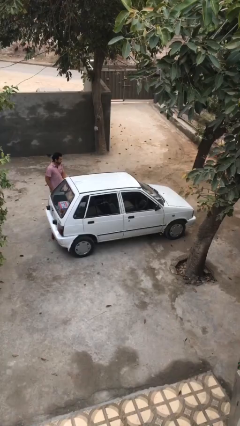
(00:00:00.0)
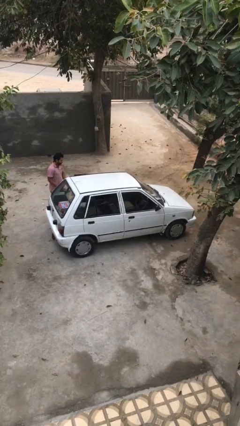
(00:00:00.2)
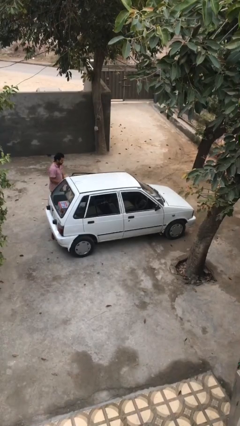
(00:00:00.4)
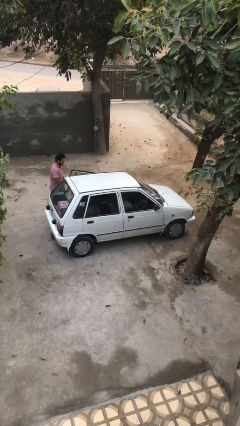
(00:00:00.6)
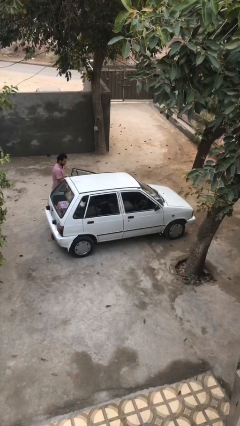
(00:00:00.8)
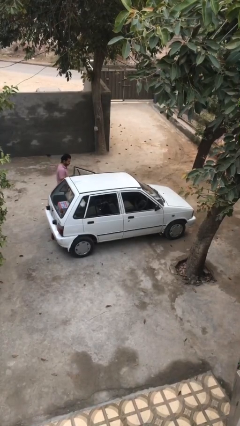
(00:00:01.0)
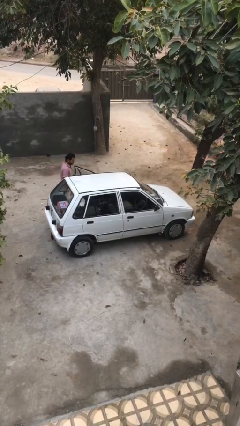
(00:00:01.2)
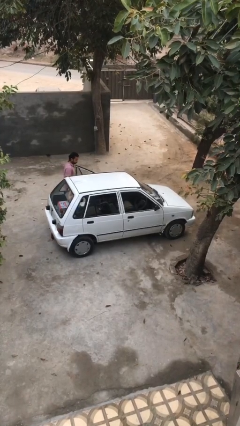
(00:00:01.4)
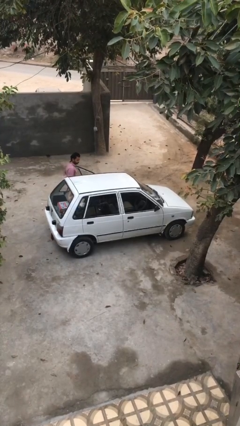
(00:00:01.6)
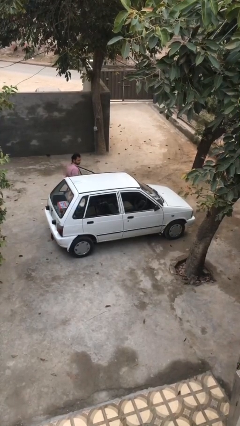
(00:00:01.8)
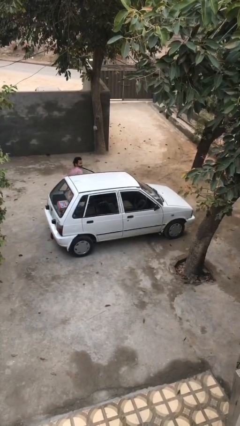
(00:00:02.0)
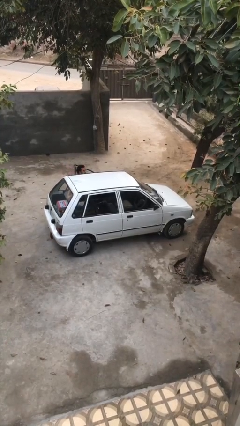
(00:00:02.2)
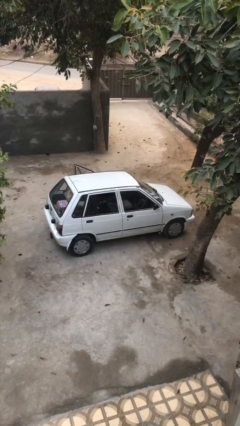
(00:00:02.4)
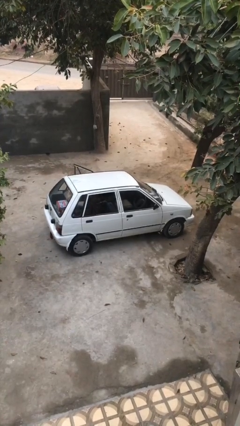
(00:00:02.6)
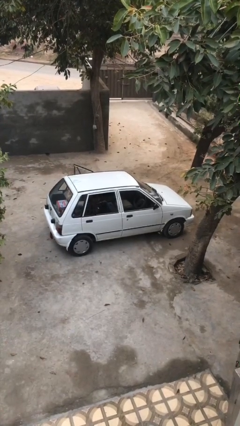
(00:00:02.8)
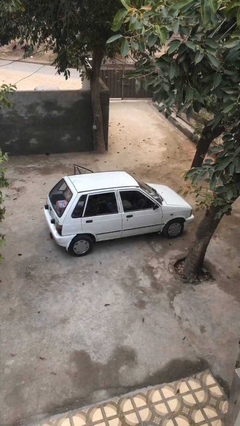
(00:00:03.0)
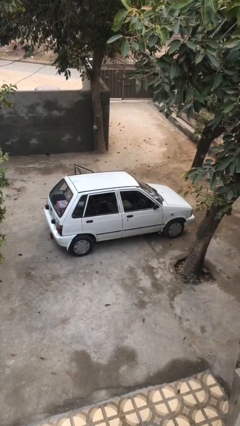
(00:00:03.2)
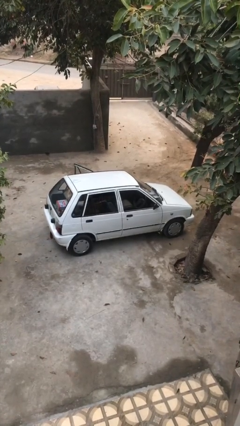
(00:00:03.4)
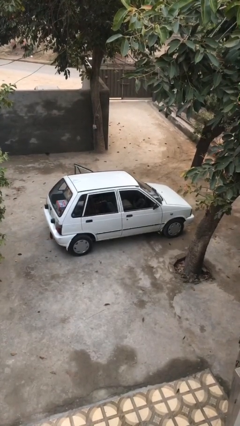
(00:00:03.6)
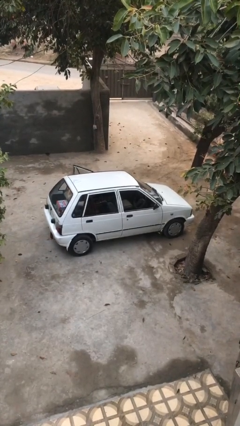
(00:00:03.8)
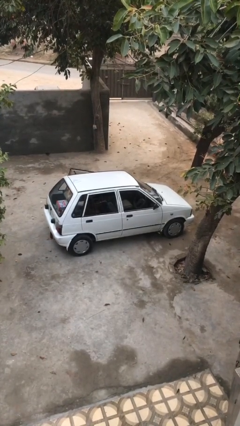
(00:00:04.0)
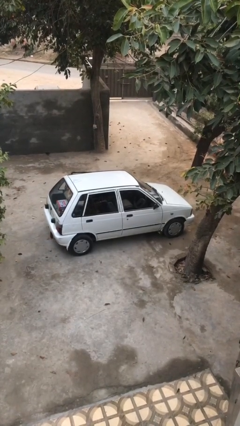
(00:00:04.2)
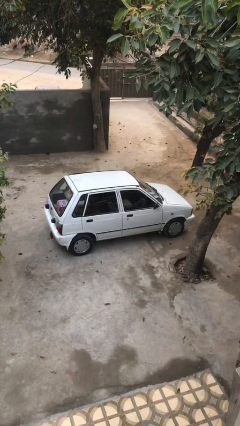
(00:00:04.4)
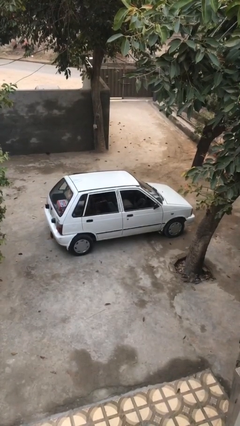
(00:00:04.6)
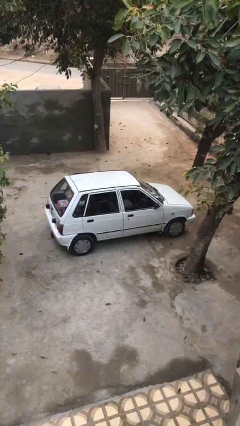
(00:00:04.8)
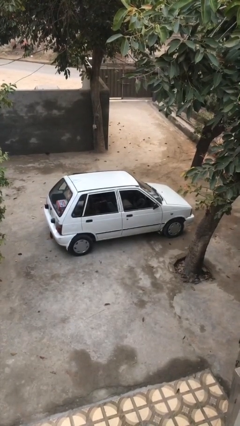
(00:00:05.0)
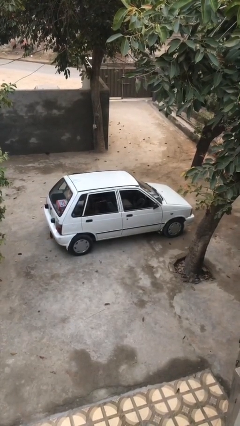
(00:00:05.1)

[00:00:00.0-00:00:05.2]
car picks up person

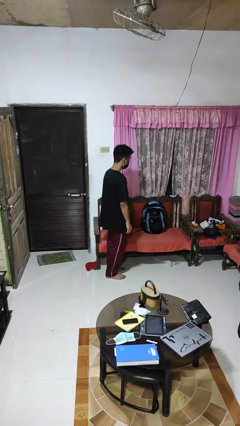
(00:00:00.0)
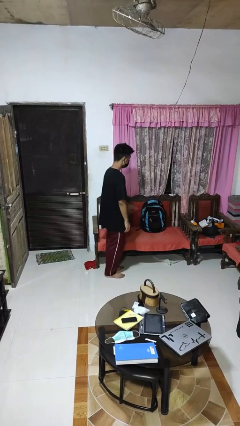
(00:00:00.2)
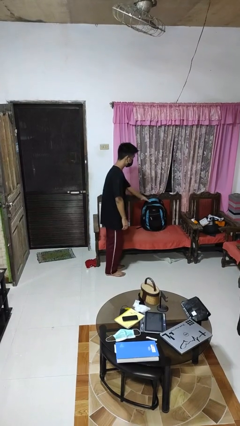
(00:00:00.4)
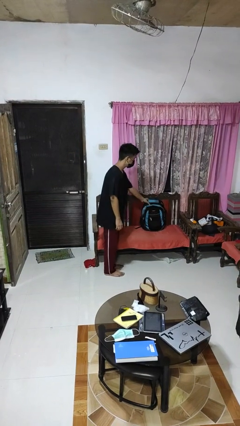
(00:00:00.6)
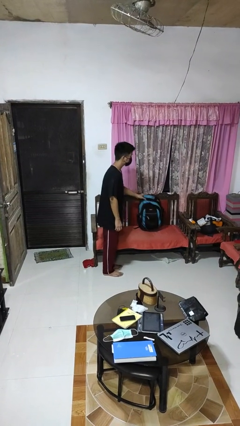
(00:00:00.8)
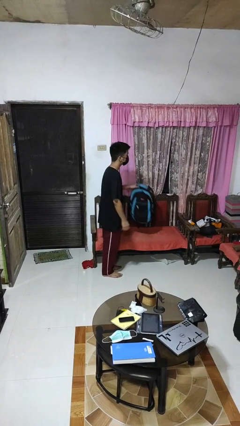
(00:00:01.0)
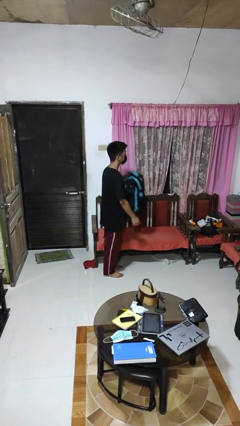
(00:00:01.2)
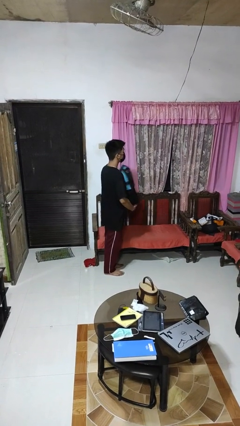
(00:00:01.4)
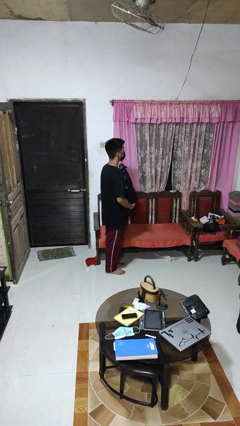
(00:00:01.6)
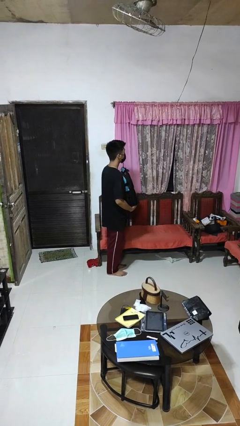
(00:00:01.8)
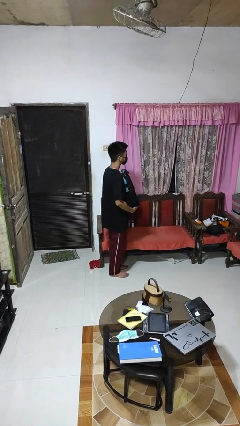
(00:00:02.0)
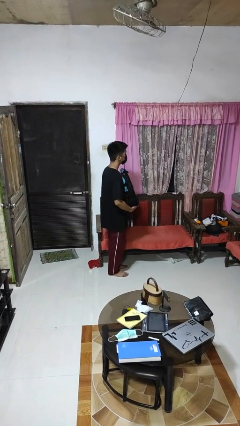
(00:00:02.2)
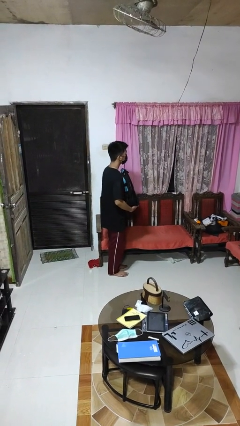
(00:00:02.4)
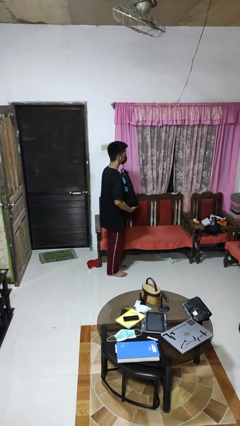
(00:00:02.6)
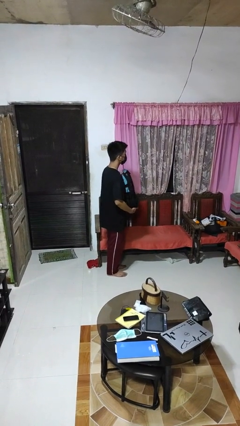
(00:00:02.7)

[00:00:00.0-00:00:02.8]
person picks up object from couch

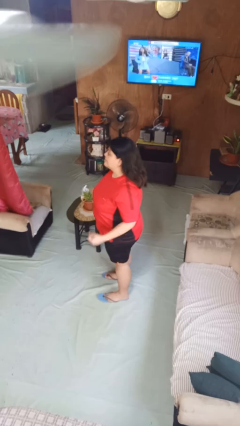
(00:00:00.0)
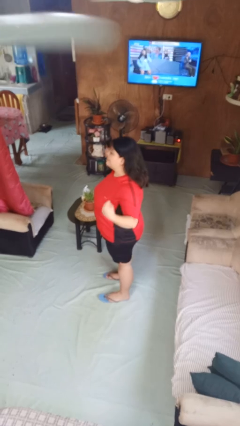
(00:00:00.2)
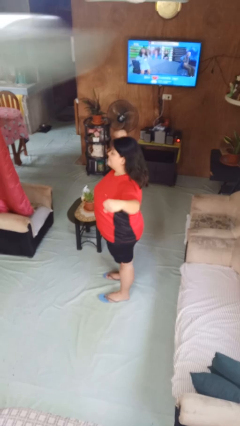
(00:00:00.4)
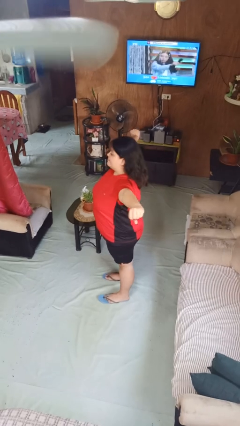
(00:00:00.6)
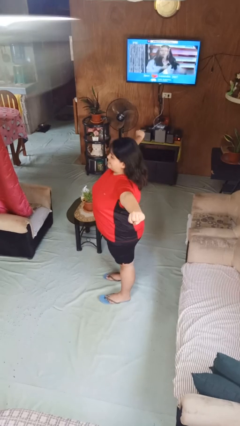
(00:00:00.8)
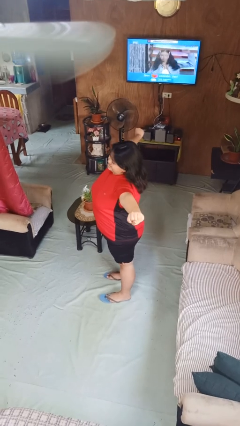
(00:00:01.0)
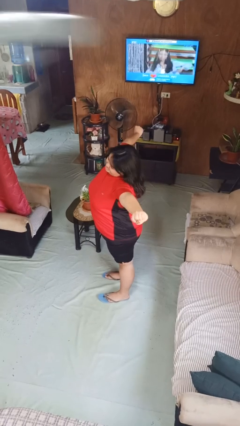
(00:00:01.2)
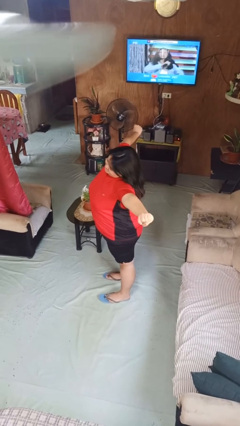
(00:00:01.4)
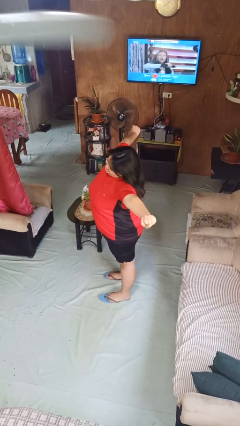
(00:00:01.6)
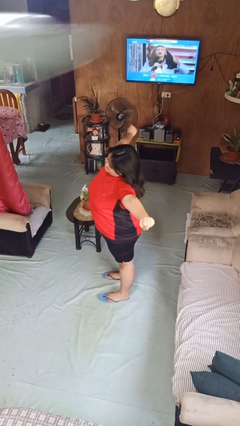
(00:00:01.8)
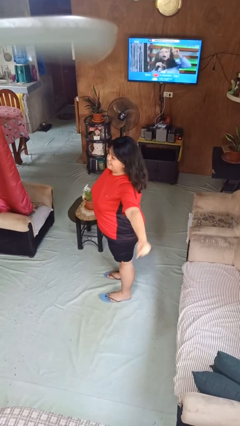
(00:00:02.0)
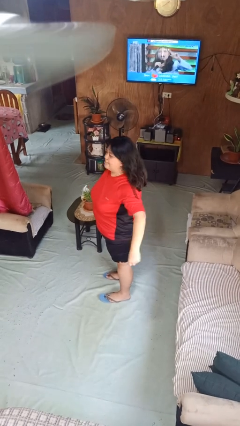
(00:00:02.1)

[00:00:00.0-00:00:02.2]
person stretches arms to side

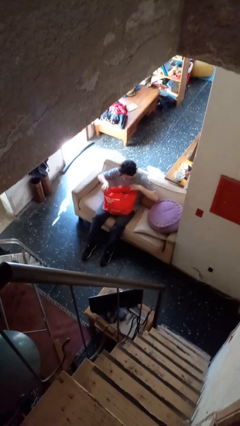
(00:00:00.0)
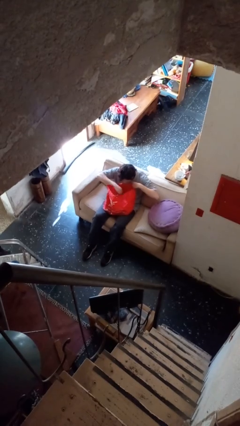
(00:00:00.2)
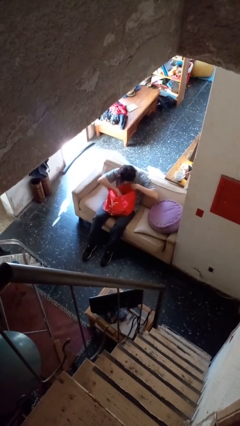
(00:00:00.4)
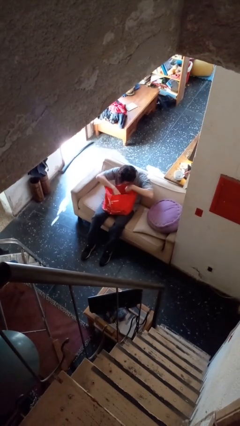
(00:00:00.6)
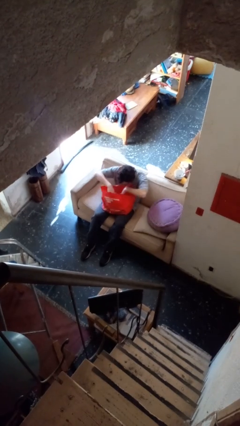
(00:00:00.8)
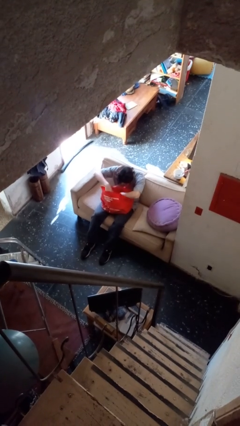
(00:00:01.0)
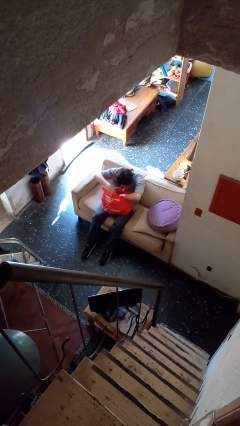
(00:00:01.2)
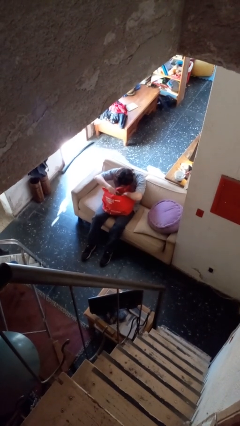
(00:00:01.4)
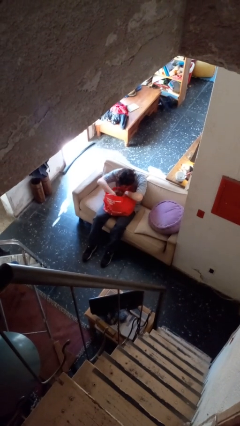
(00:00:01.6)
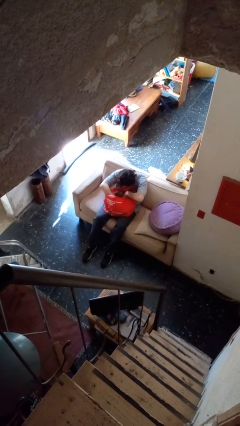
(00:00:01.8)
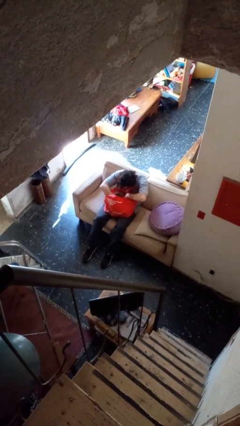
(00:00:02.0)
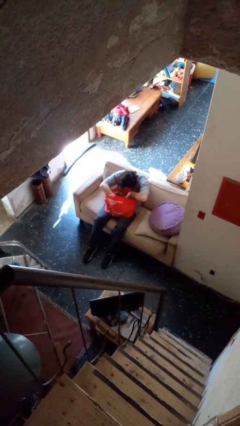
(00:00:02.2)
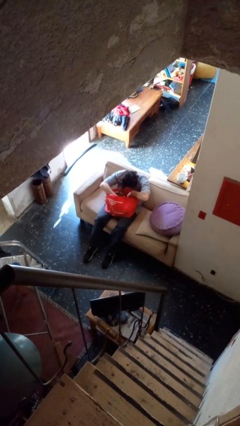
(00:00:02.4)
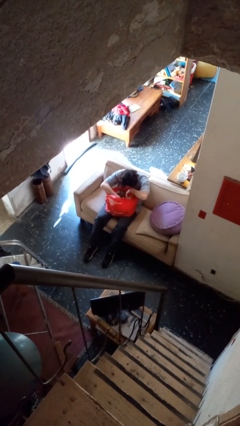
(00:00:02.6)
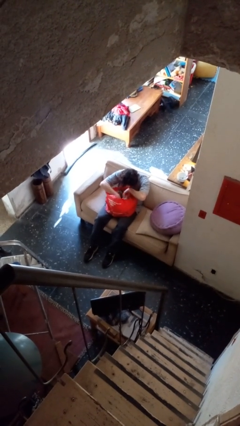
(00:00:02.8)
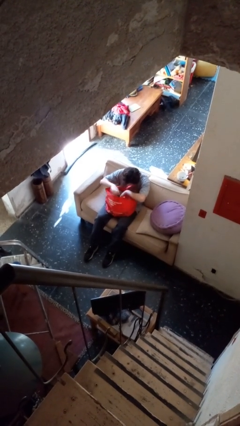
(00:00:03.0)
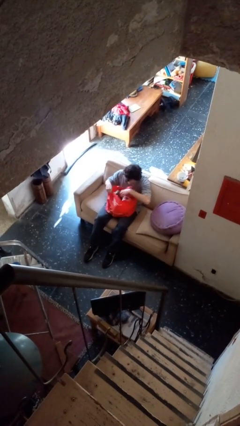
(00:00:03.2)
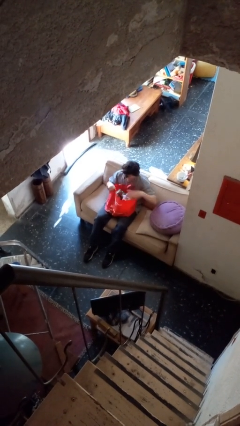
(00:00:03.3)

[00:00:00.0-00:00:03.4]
person searches in bag

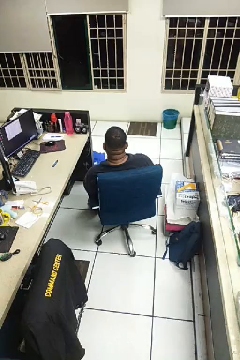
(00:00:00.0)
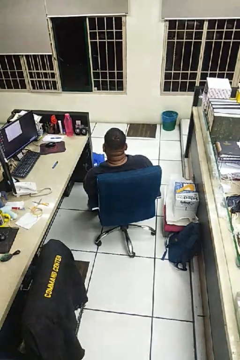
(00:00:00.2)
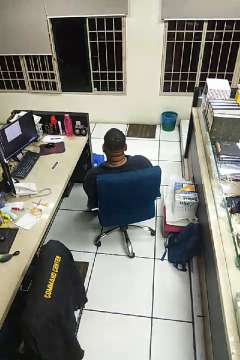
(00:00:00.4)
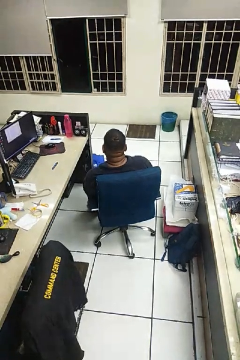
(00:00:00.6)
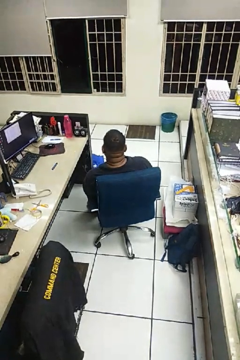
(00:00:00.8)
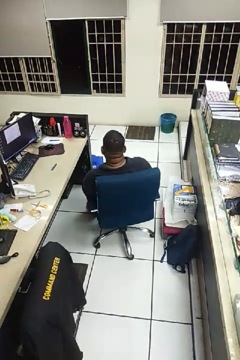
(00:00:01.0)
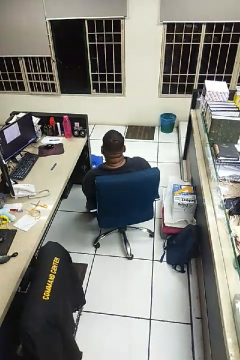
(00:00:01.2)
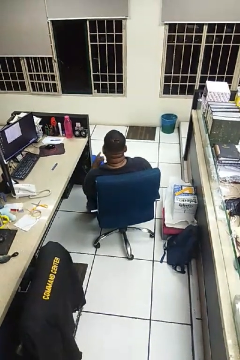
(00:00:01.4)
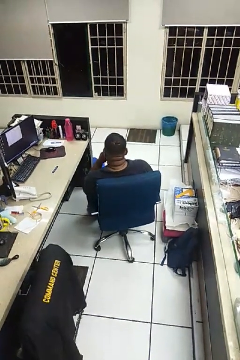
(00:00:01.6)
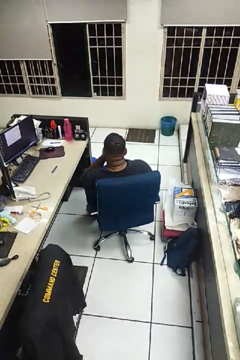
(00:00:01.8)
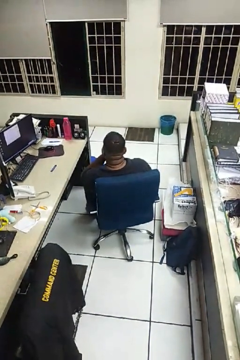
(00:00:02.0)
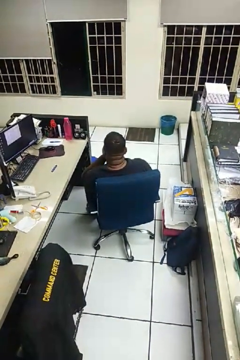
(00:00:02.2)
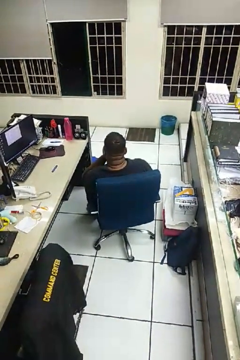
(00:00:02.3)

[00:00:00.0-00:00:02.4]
person gestures be quiet

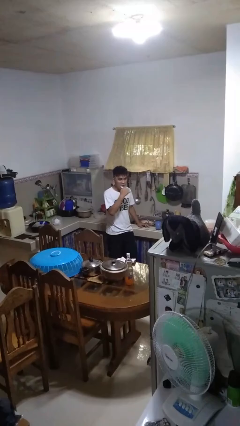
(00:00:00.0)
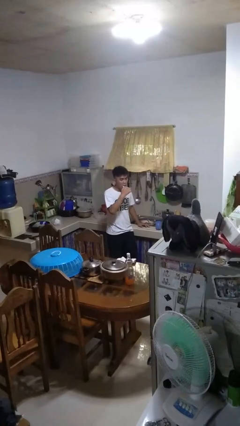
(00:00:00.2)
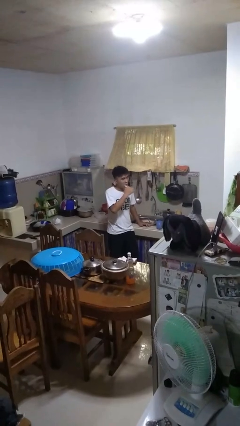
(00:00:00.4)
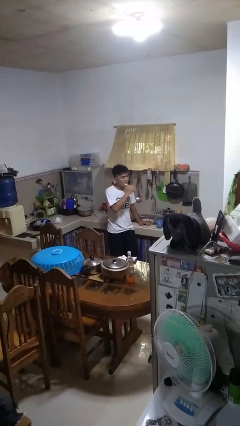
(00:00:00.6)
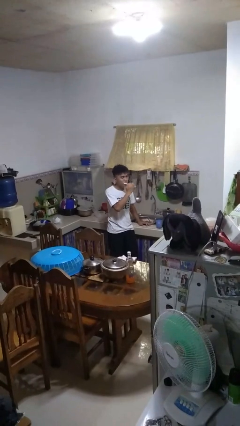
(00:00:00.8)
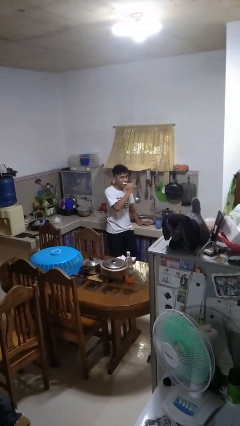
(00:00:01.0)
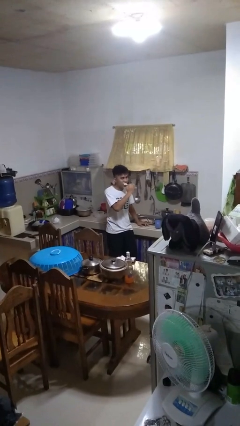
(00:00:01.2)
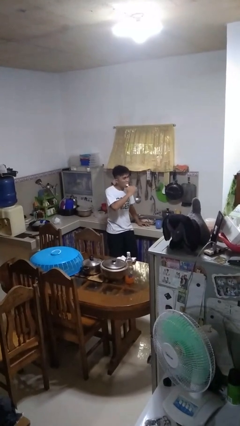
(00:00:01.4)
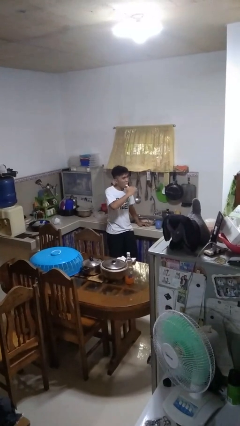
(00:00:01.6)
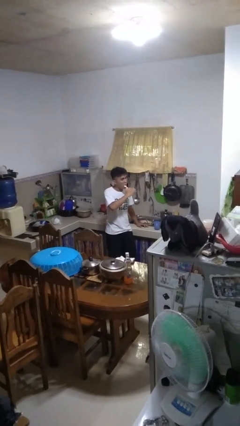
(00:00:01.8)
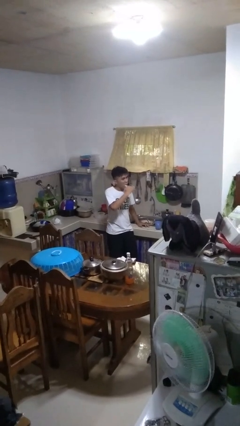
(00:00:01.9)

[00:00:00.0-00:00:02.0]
person brushes teeth
